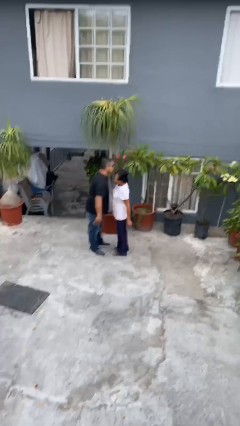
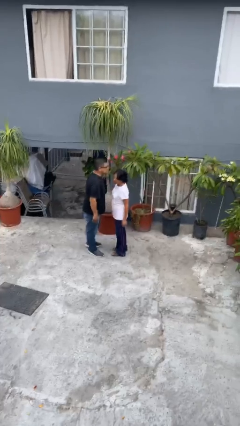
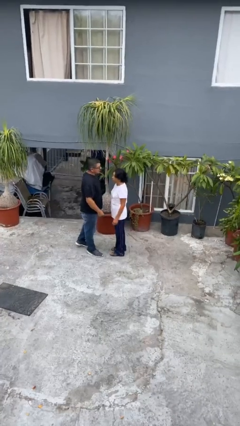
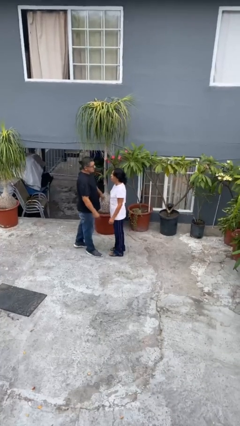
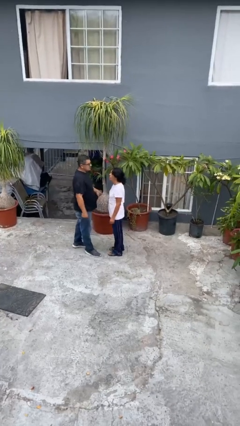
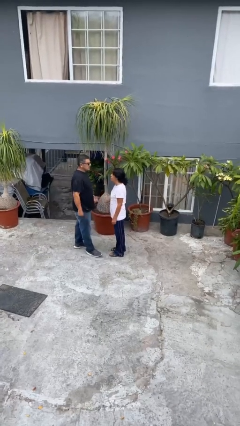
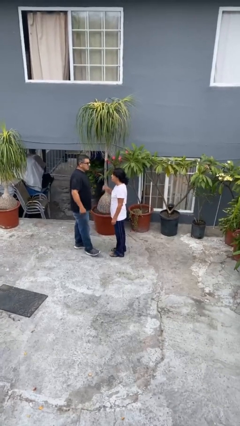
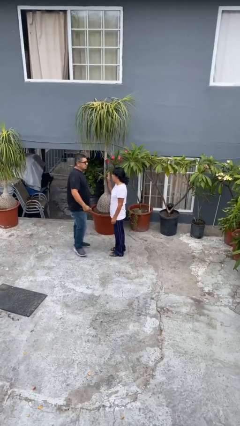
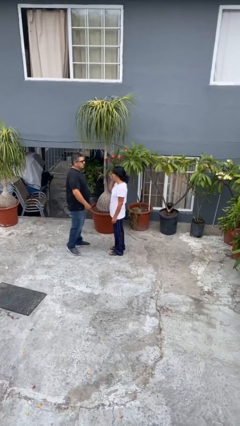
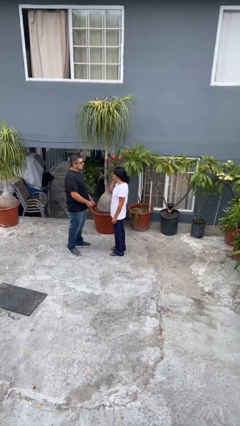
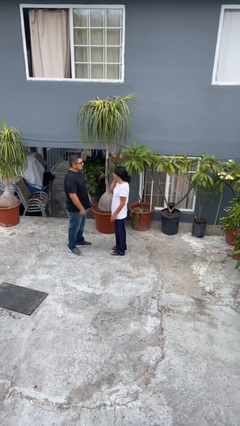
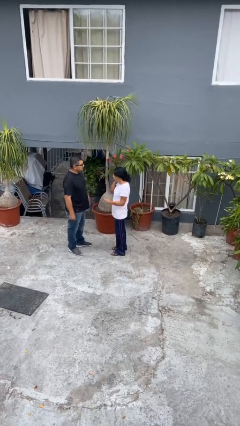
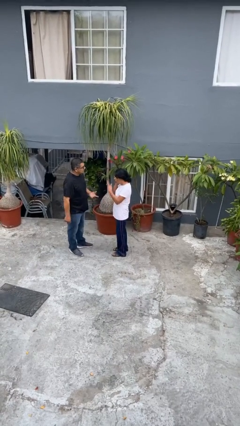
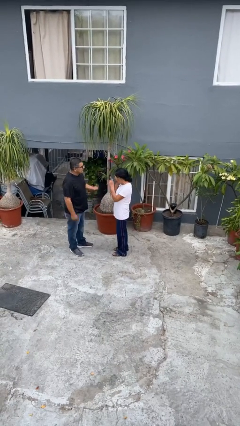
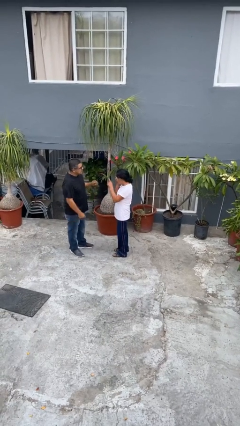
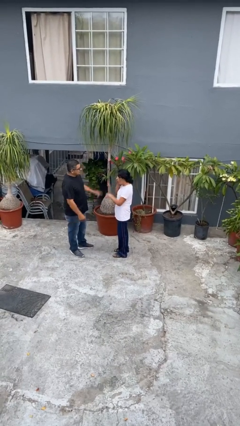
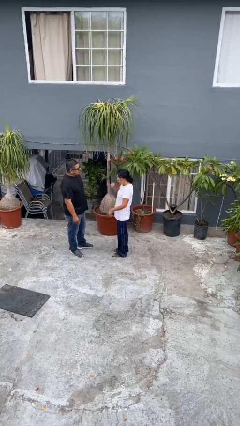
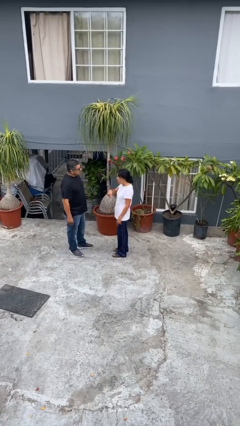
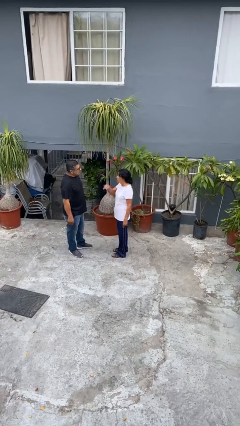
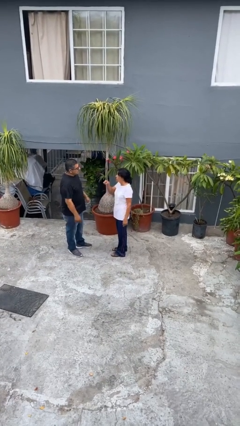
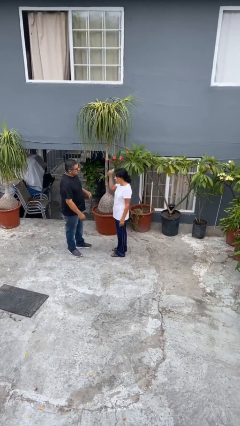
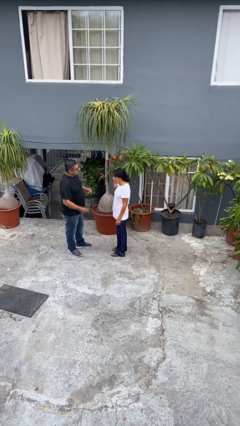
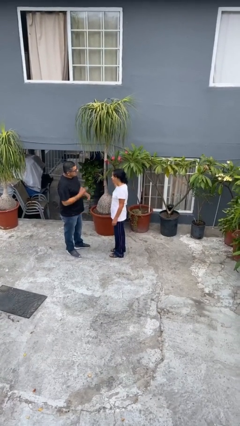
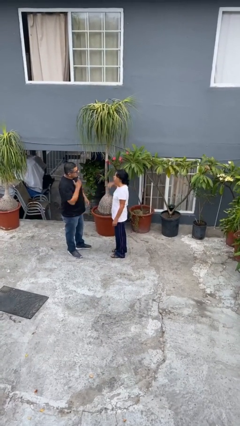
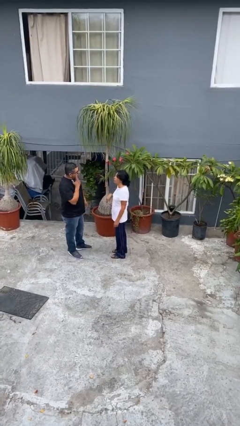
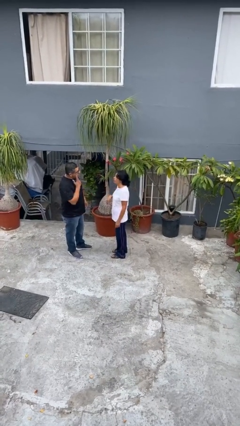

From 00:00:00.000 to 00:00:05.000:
person talks to person

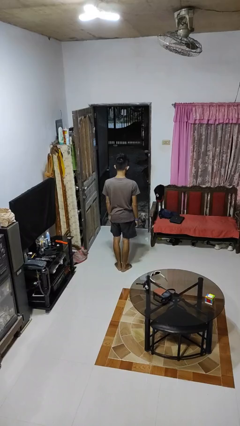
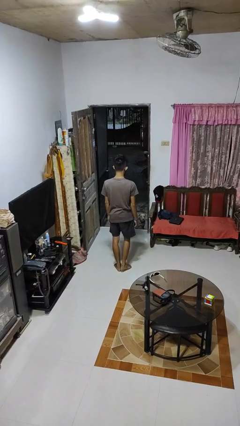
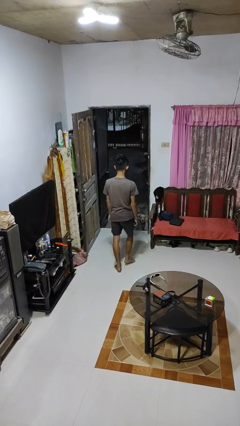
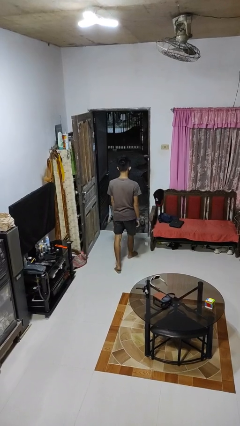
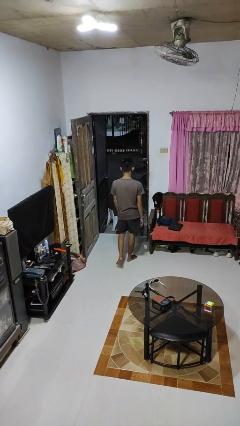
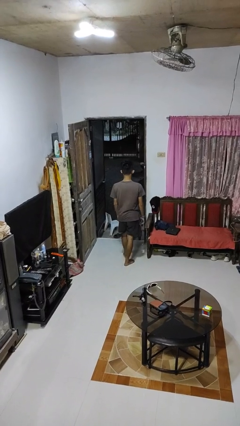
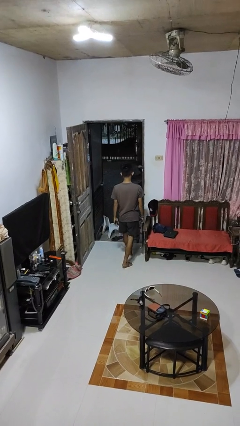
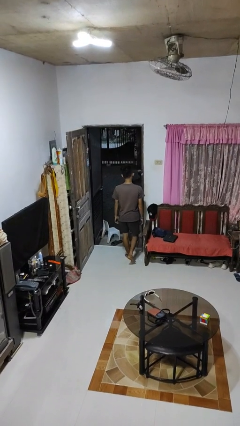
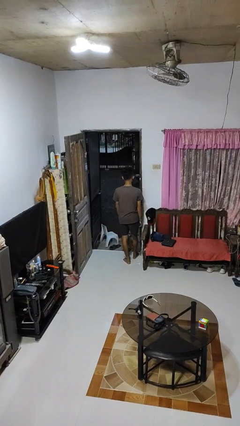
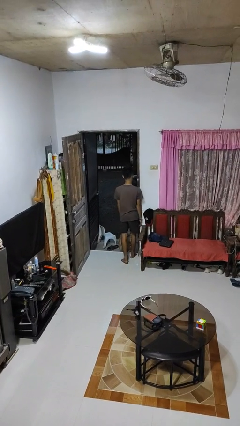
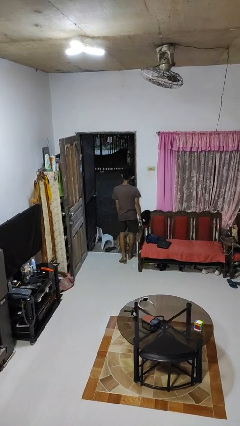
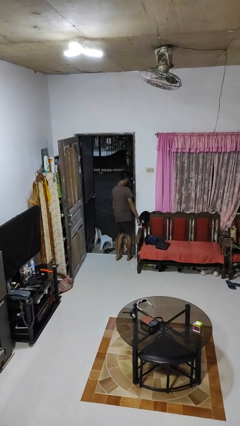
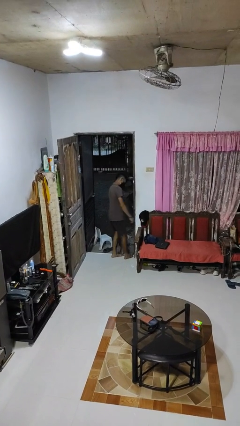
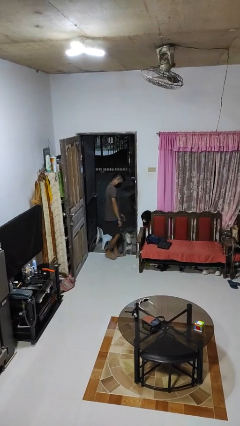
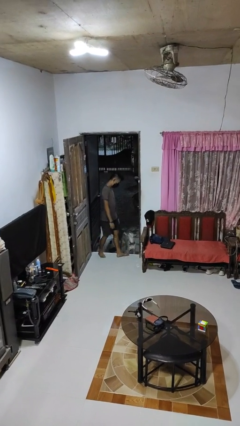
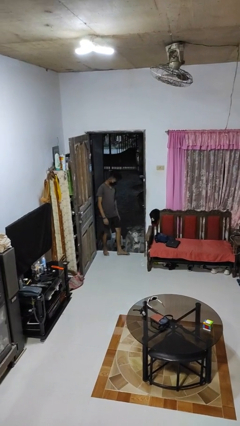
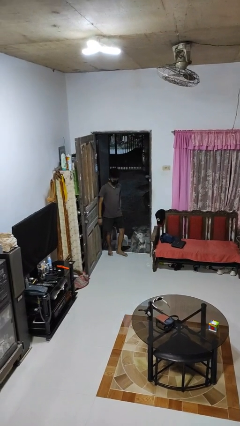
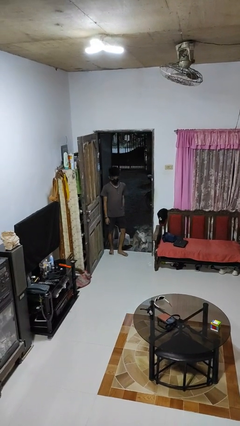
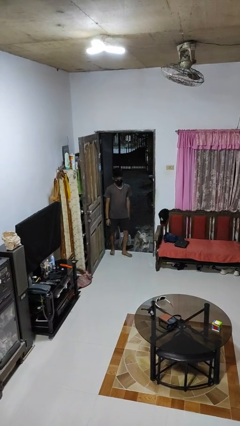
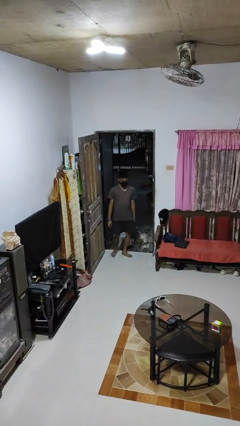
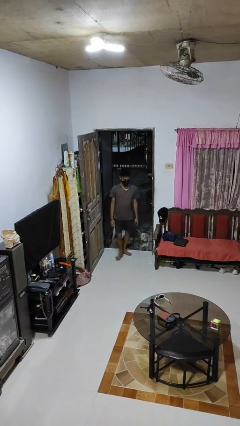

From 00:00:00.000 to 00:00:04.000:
person bumps into wall

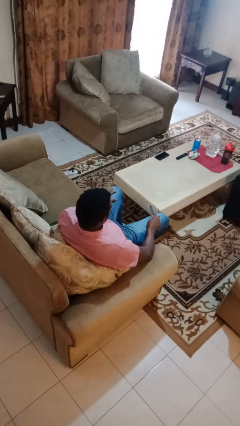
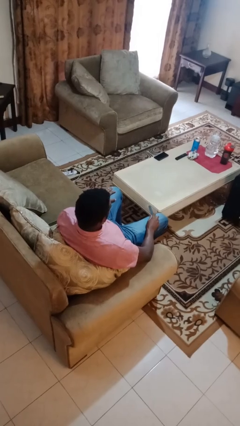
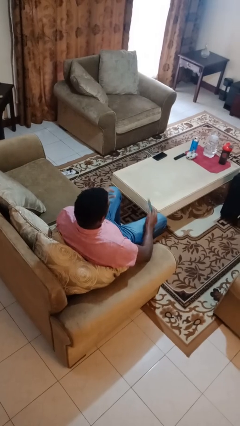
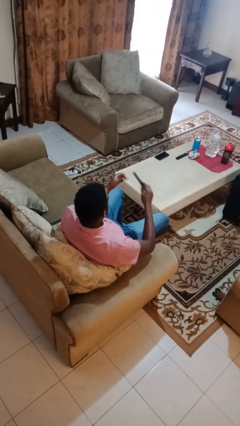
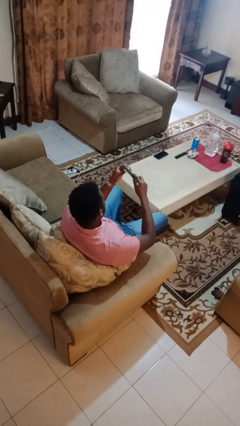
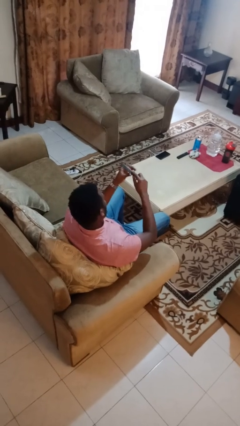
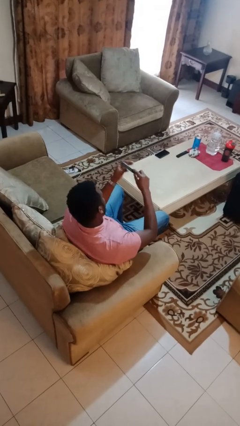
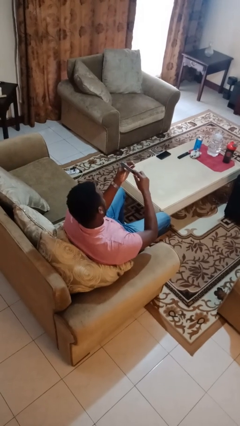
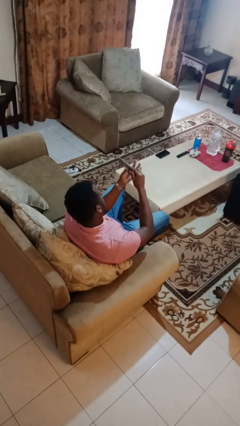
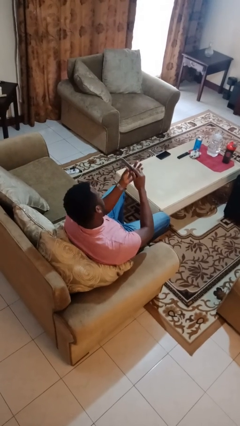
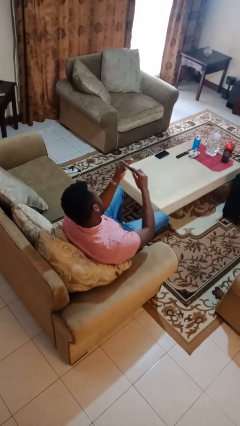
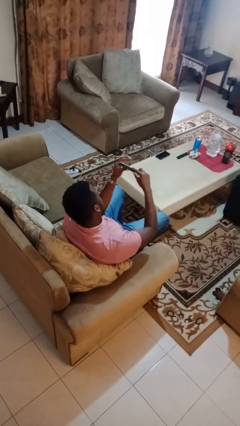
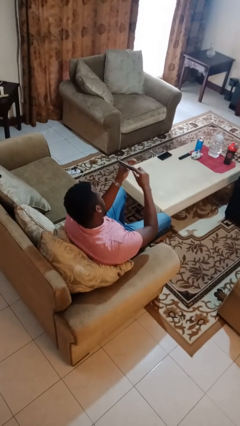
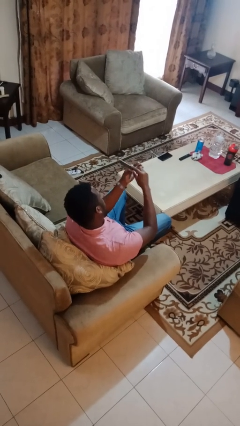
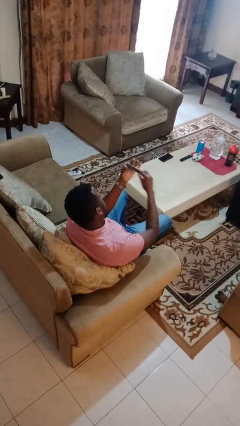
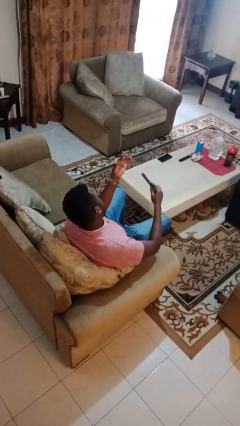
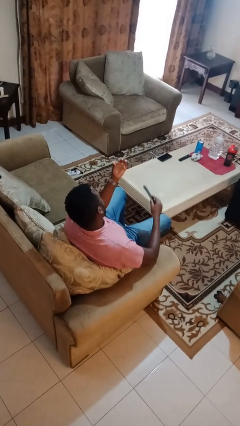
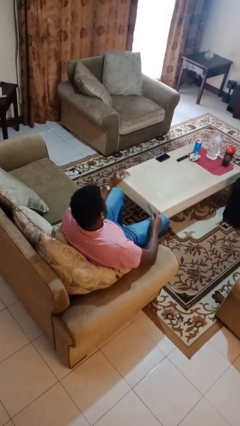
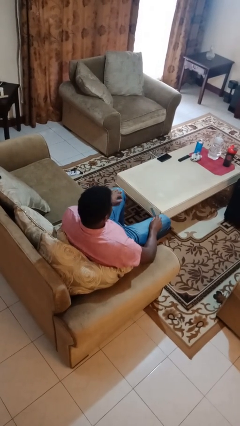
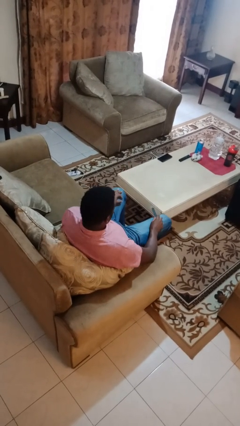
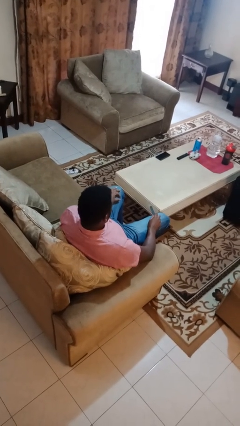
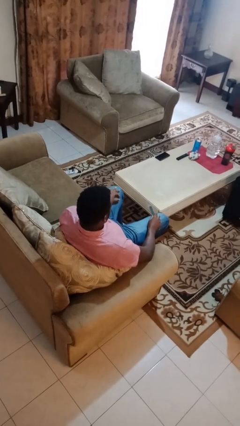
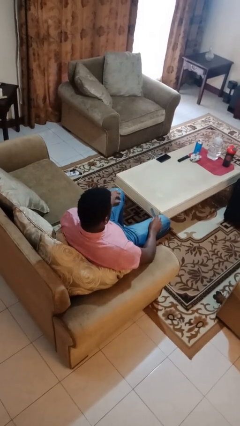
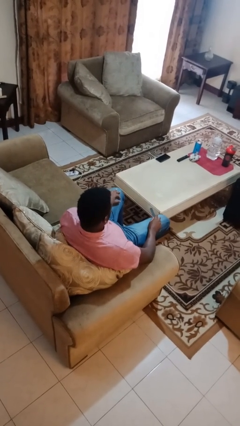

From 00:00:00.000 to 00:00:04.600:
person files fingernails

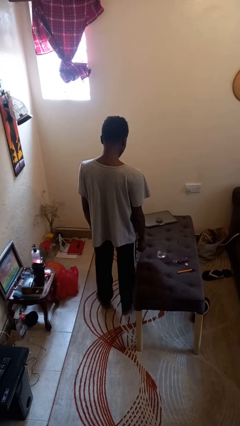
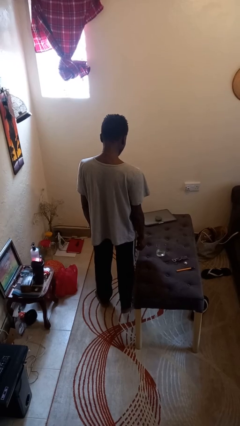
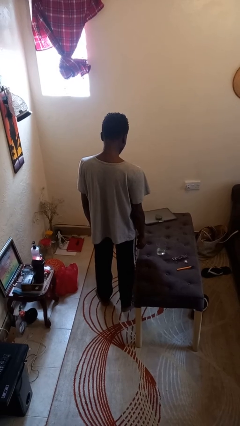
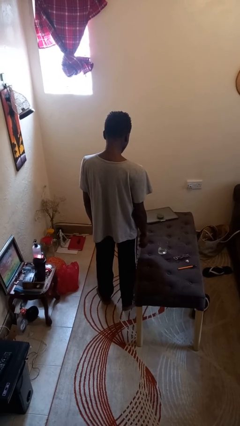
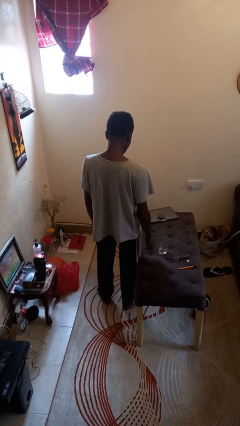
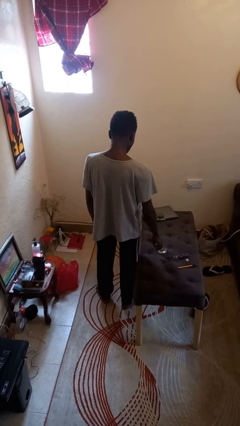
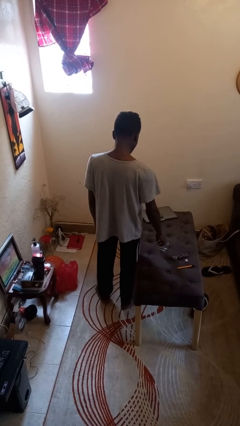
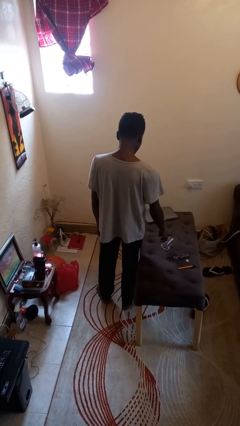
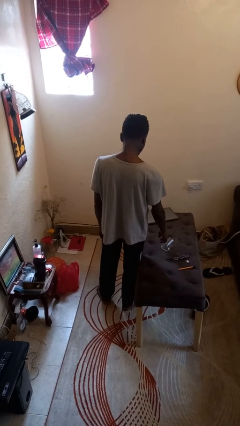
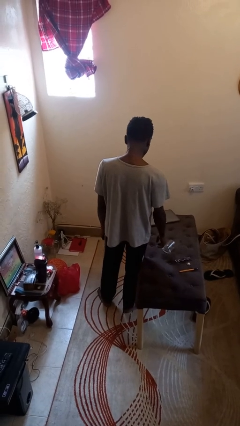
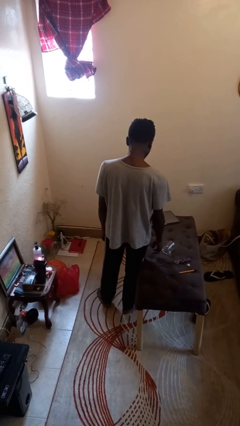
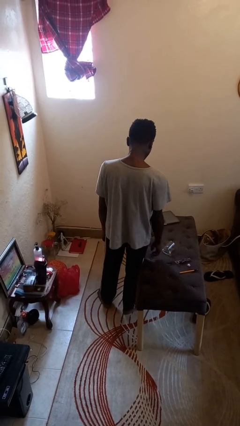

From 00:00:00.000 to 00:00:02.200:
person knocks over glass

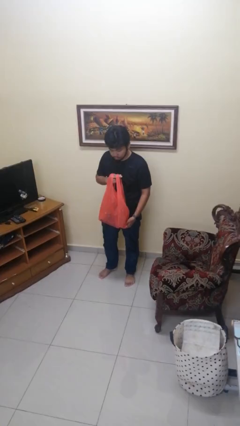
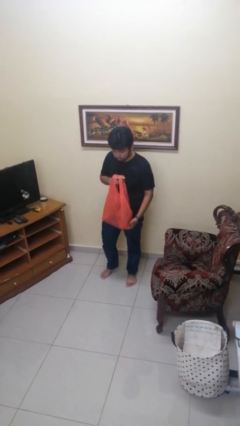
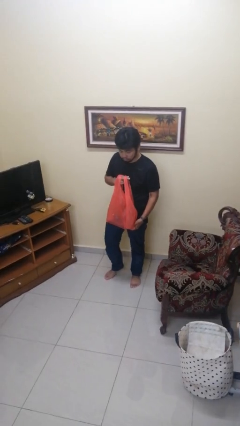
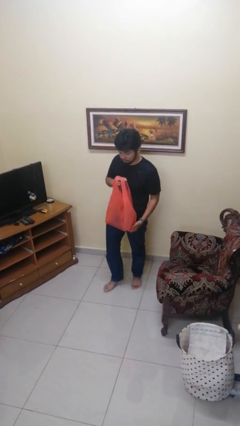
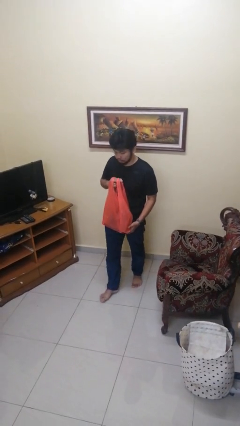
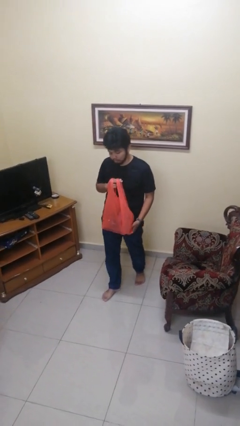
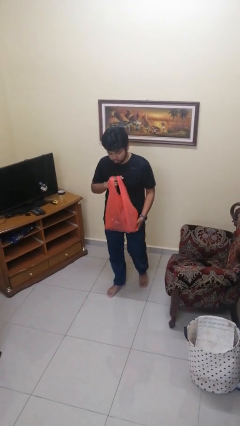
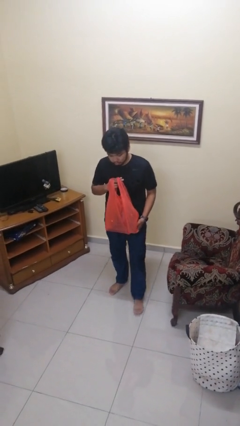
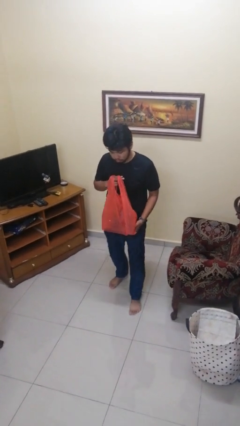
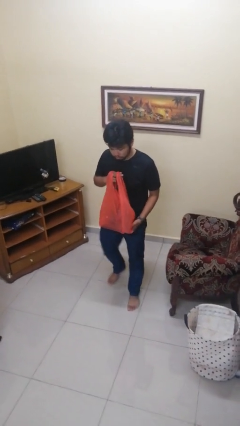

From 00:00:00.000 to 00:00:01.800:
person carries groceries
